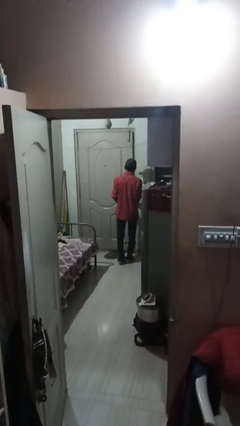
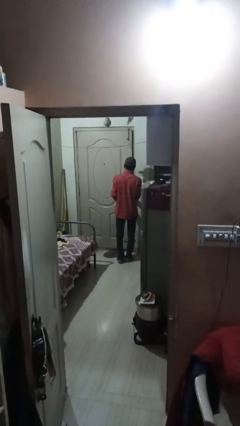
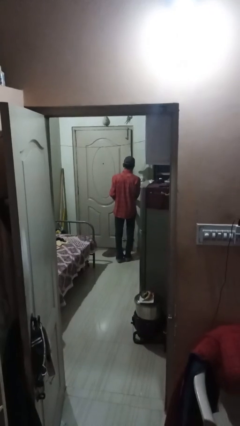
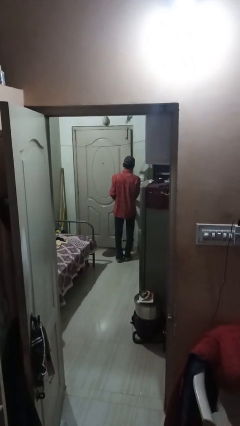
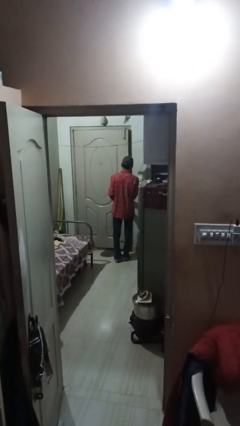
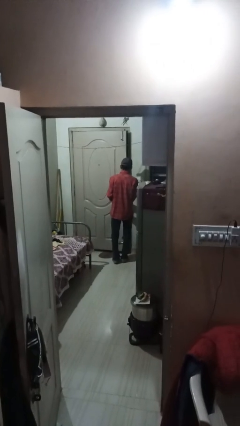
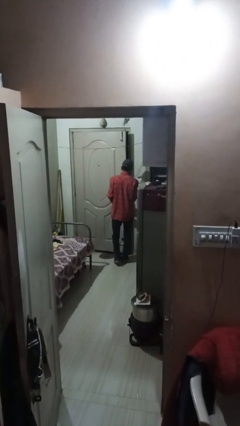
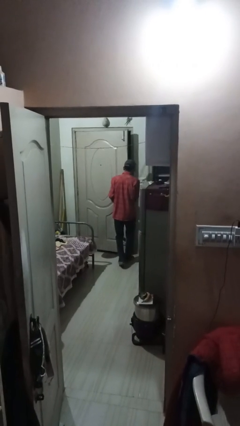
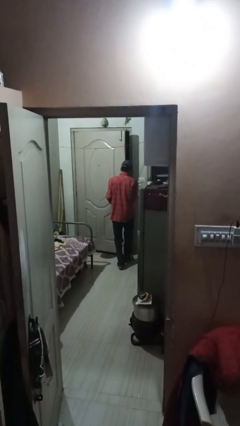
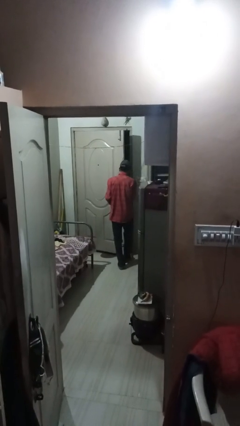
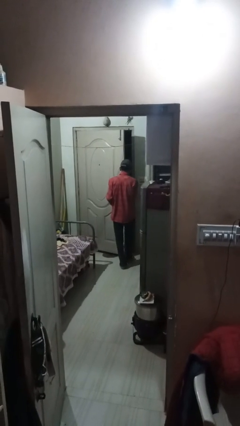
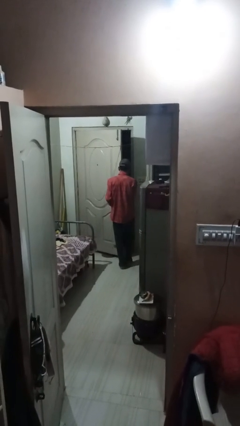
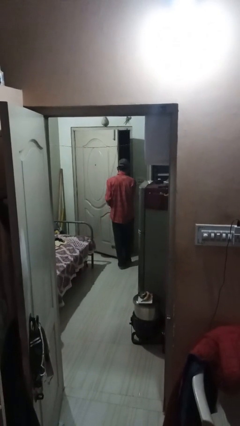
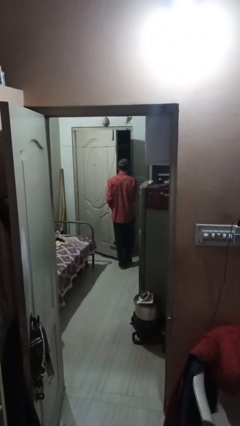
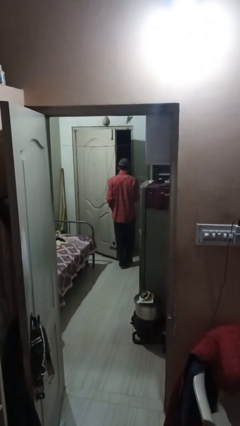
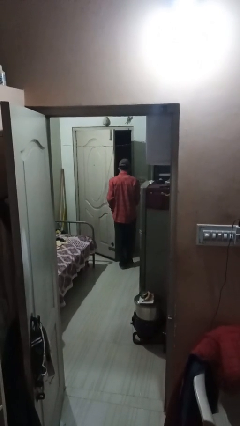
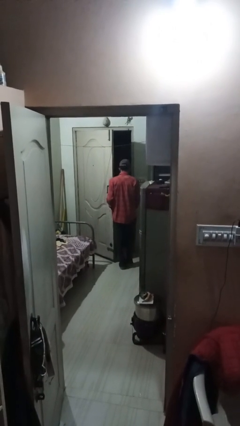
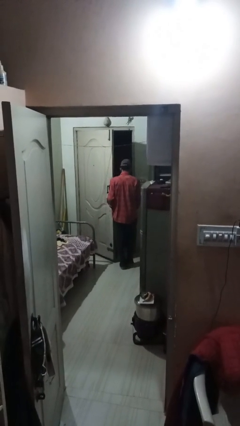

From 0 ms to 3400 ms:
person opens facility door

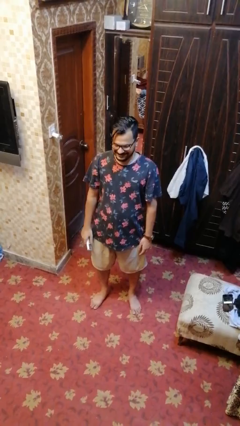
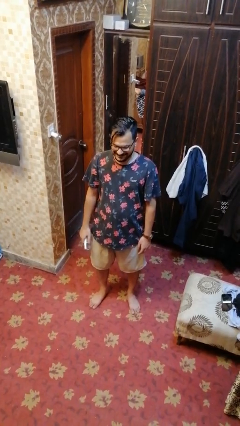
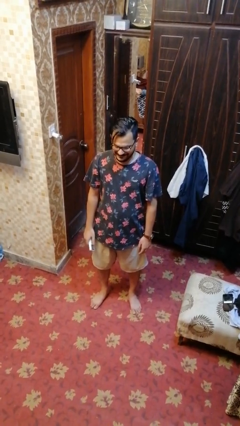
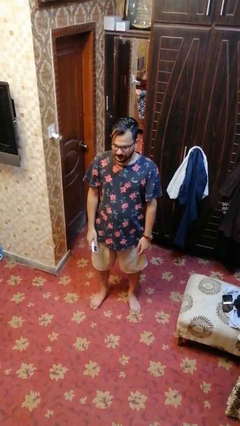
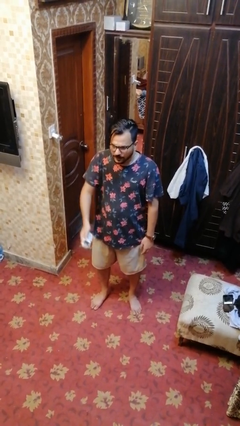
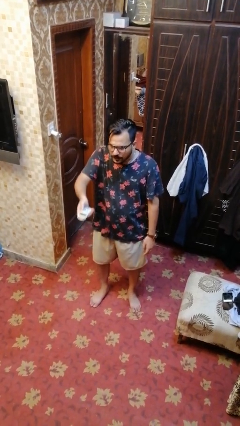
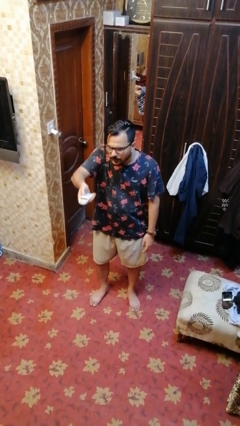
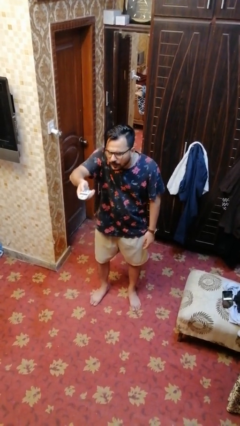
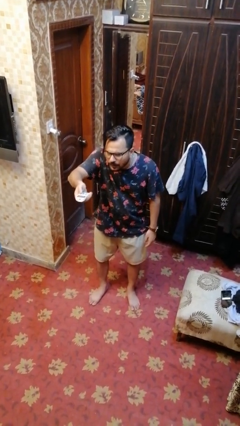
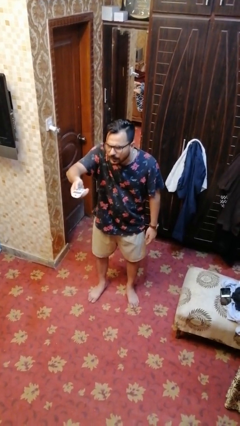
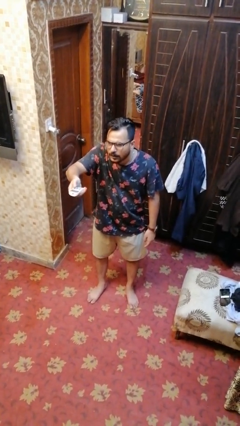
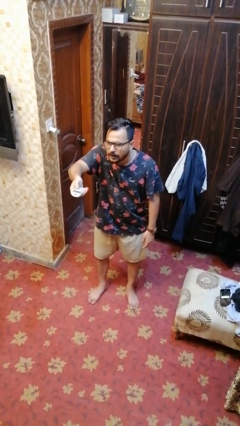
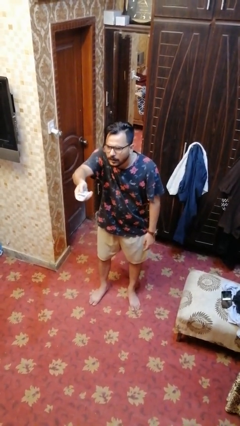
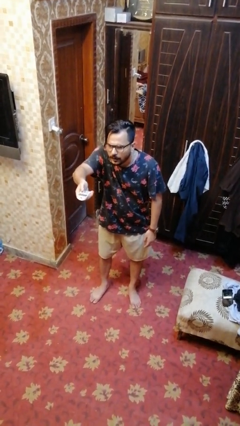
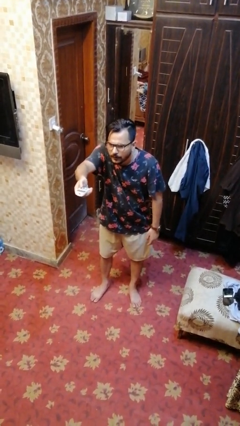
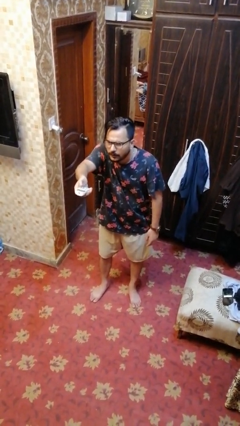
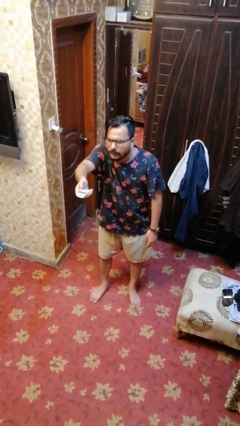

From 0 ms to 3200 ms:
person uses television remote

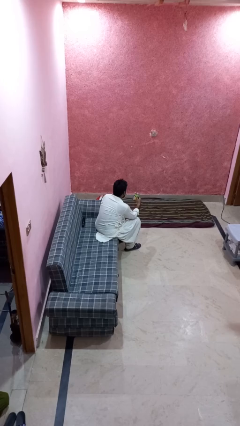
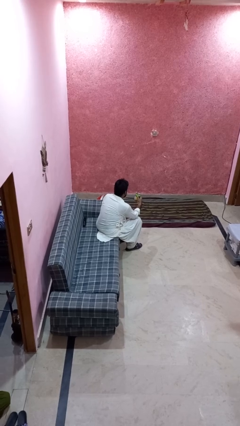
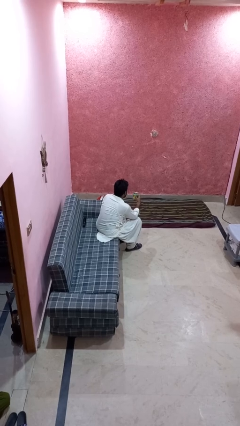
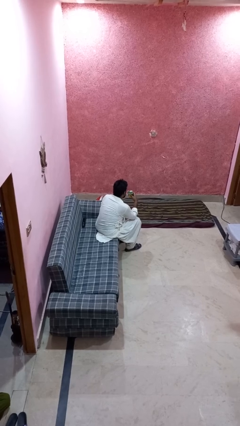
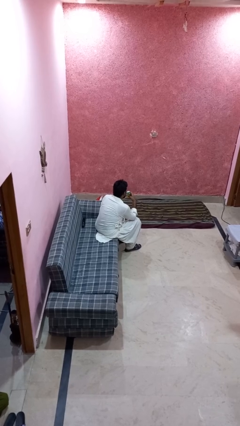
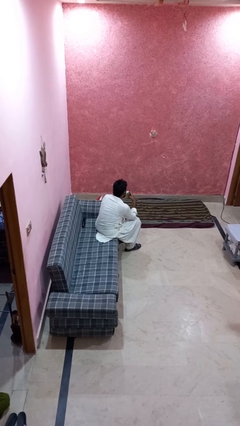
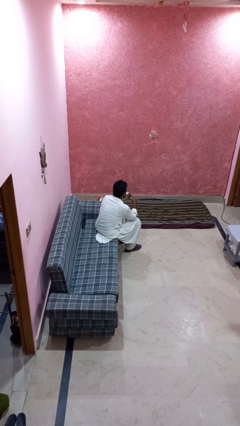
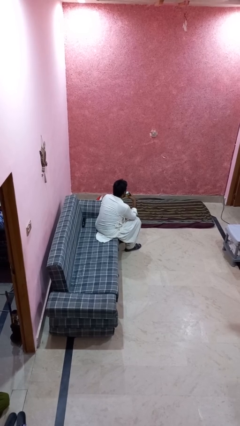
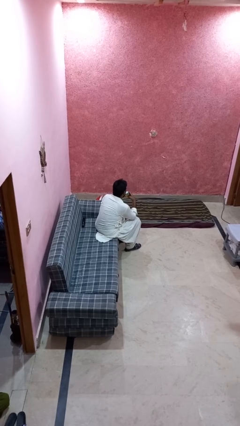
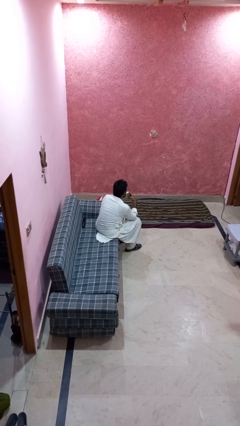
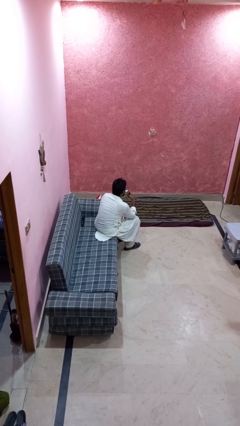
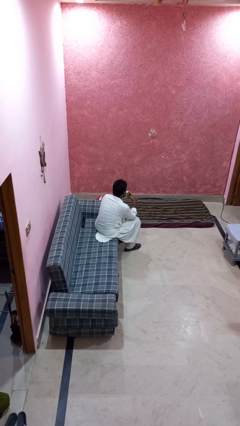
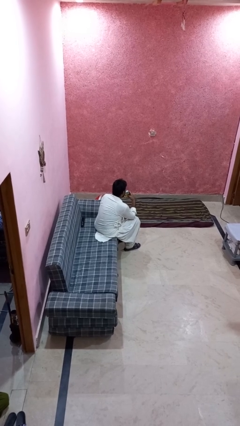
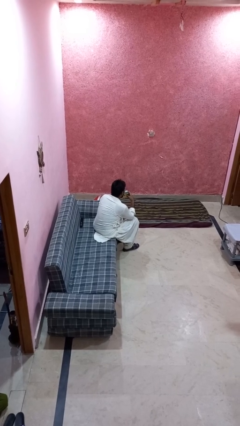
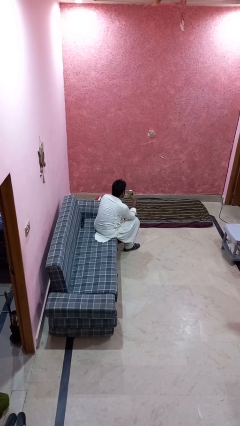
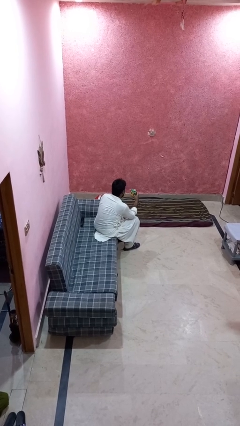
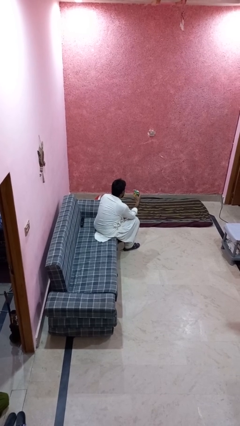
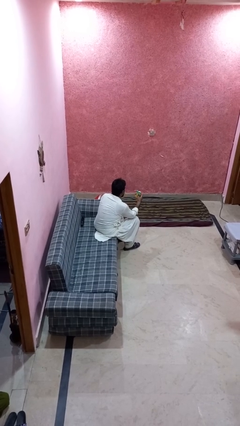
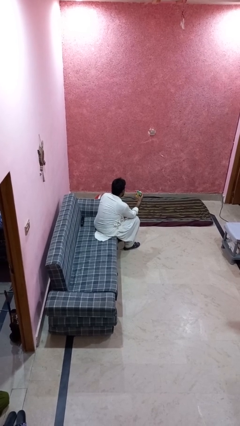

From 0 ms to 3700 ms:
person drinks from straw

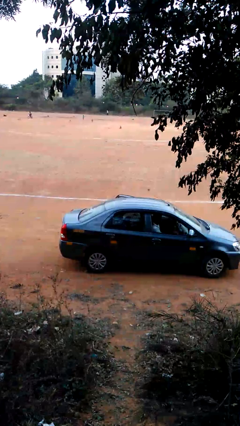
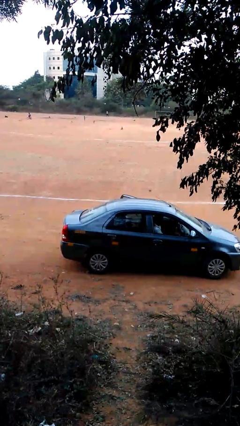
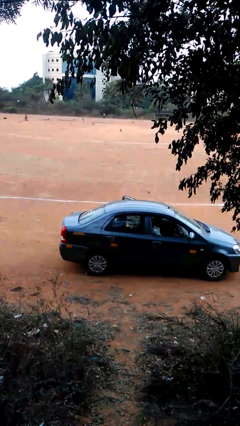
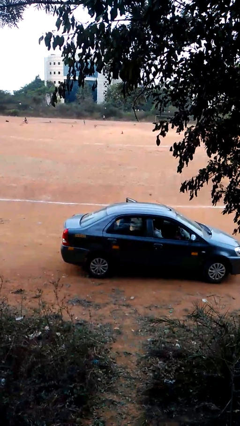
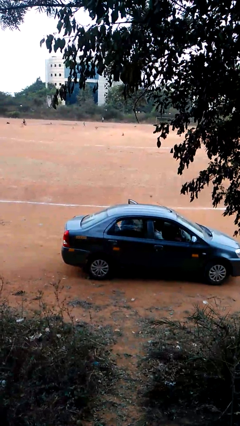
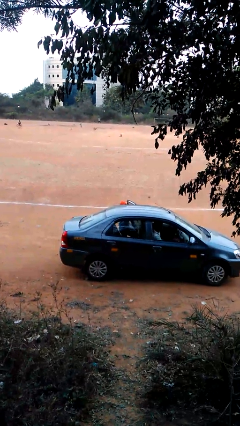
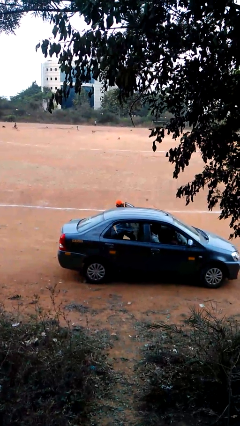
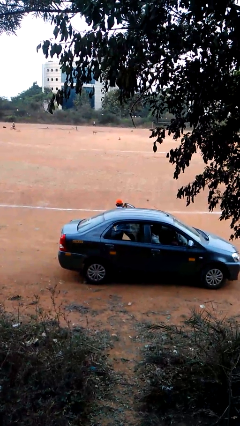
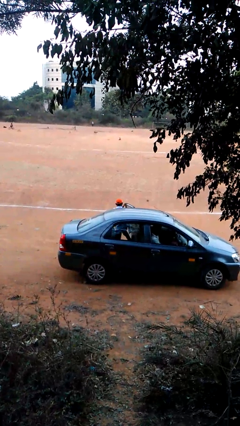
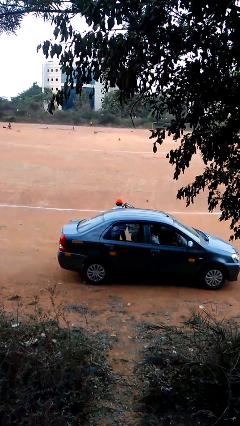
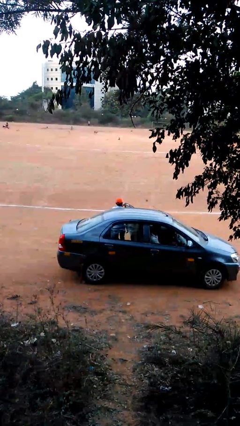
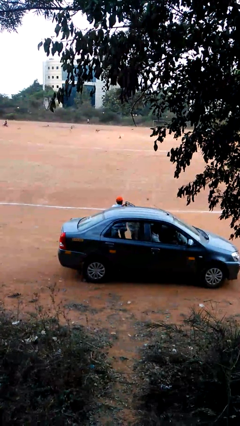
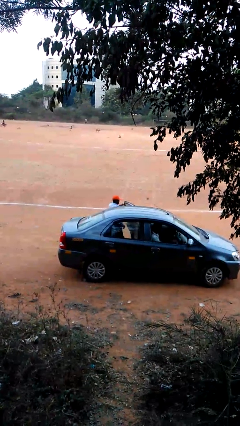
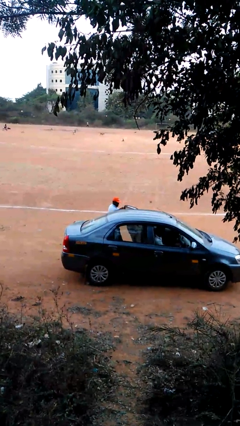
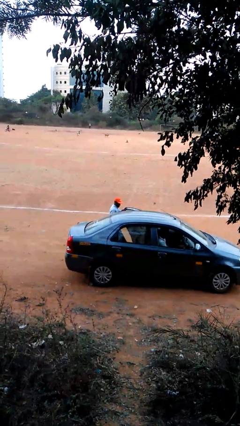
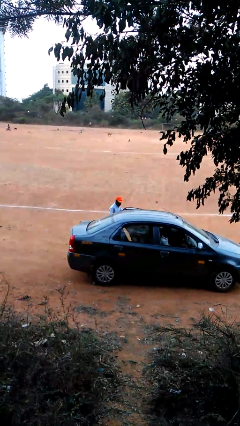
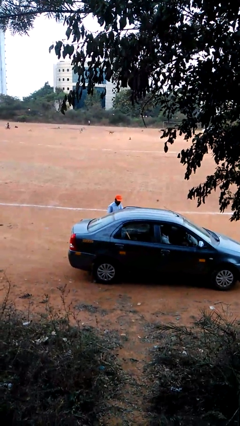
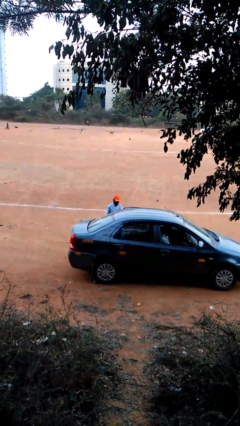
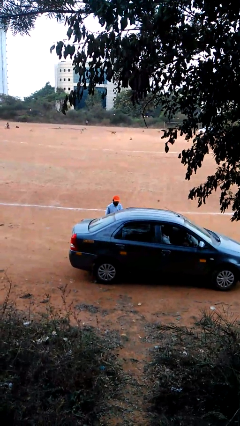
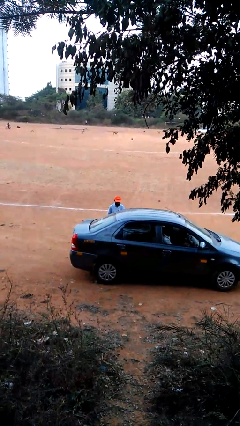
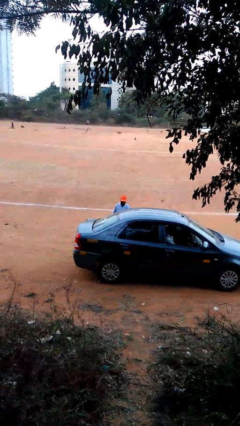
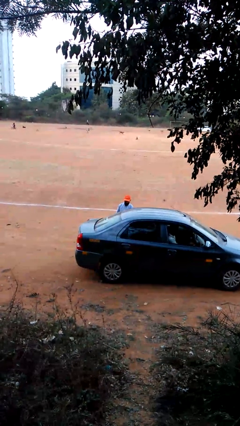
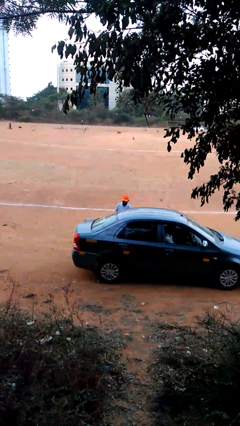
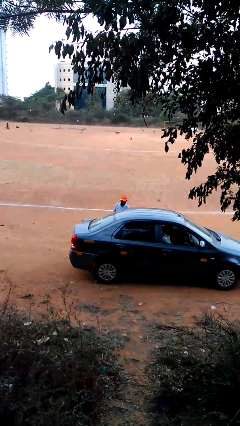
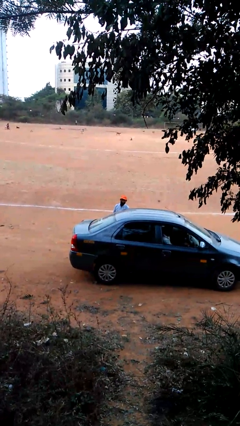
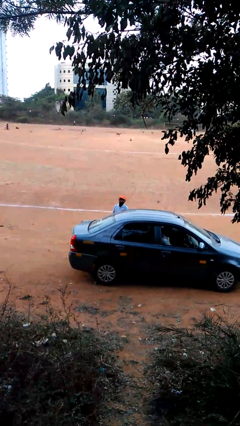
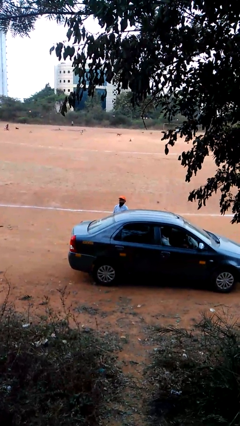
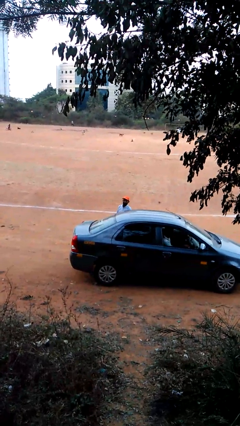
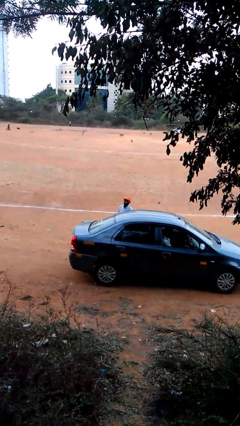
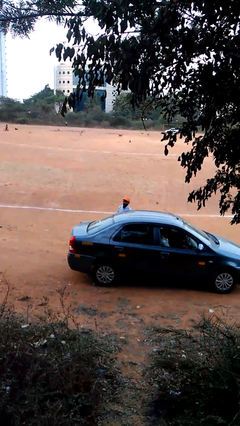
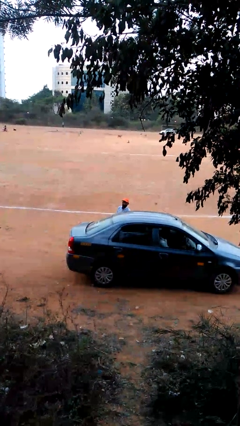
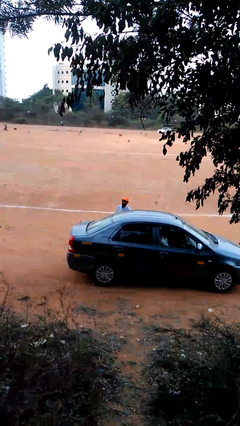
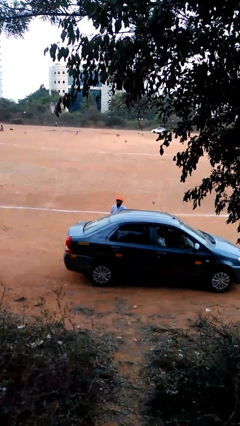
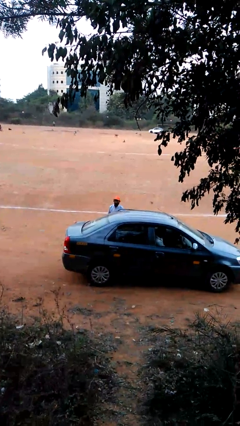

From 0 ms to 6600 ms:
person exits car

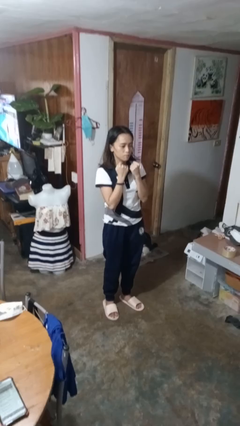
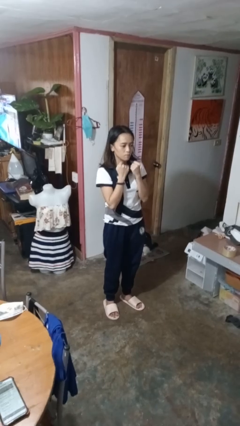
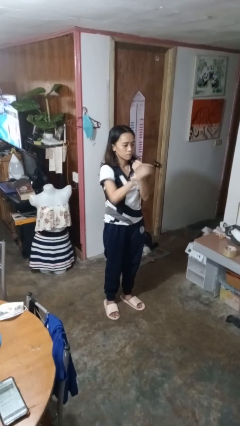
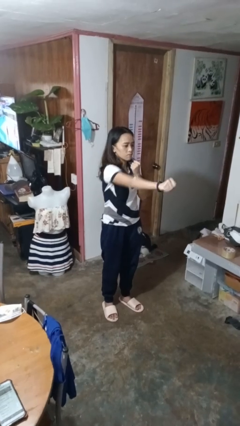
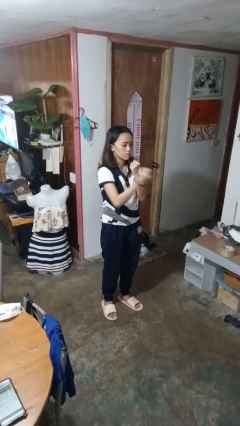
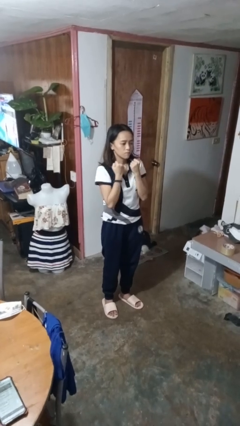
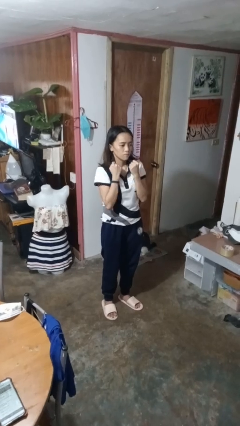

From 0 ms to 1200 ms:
person punches
